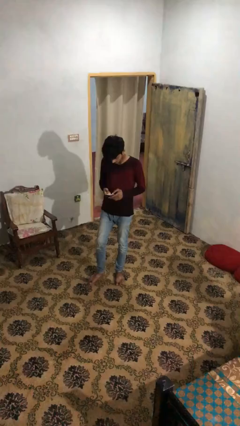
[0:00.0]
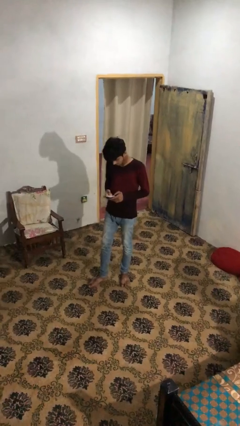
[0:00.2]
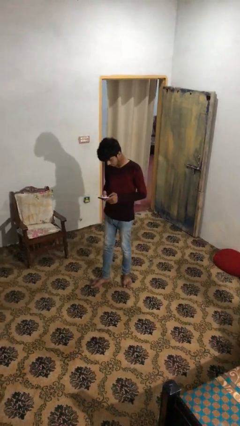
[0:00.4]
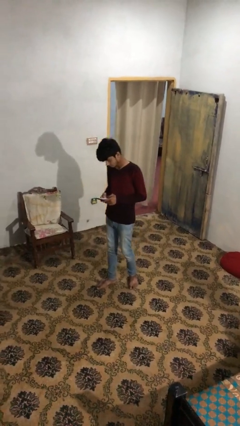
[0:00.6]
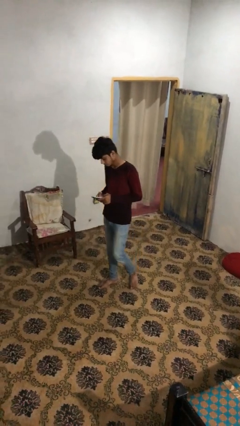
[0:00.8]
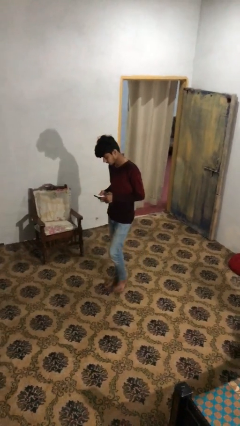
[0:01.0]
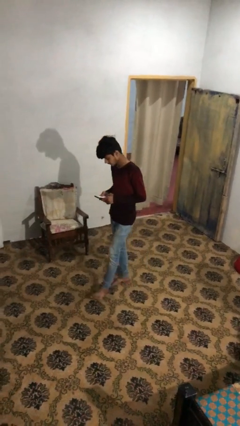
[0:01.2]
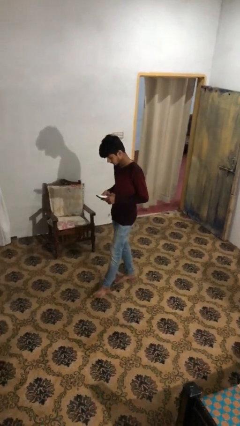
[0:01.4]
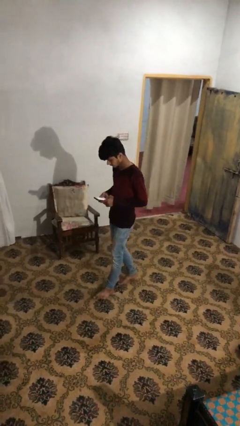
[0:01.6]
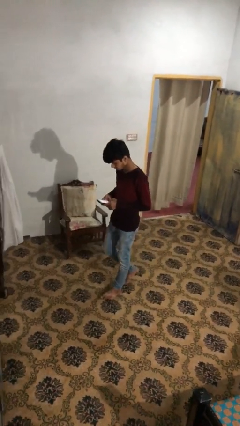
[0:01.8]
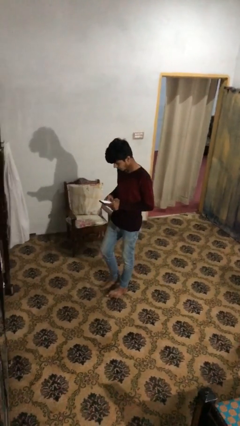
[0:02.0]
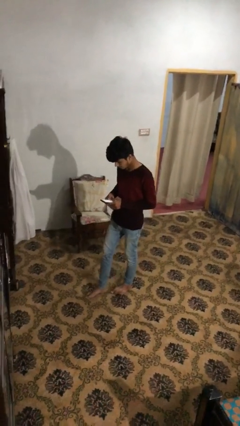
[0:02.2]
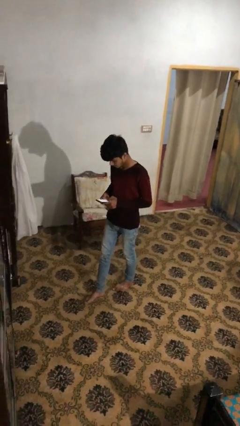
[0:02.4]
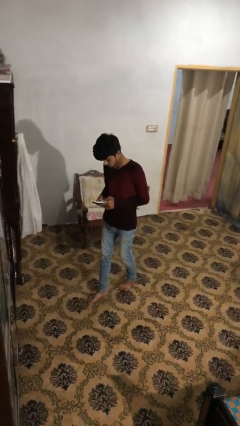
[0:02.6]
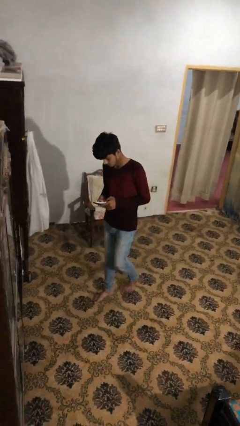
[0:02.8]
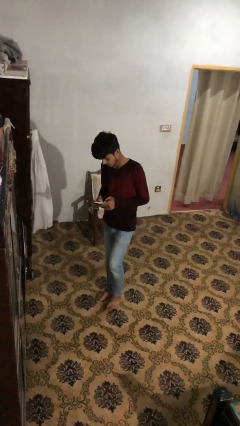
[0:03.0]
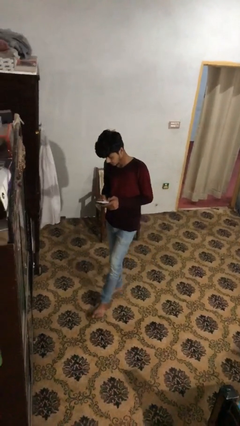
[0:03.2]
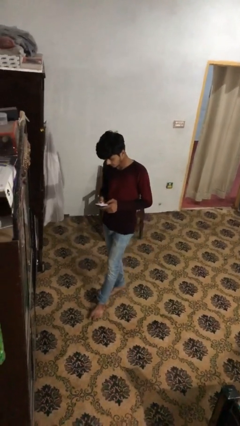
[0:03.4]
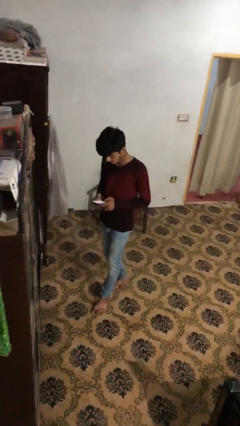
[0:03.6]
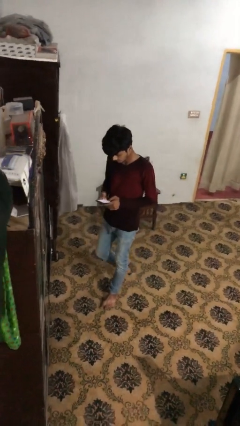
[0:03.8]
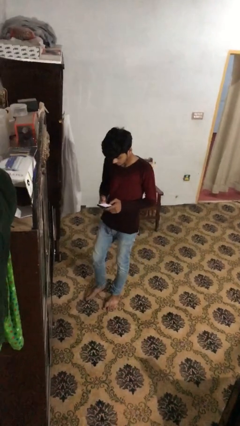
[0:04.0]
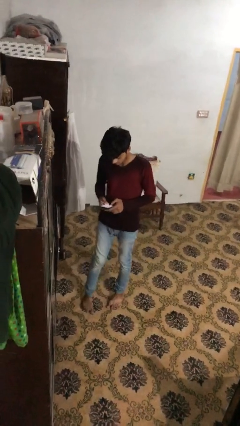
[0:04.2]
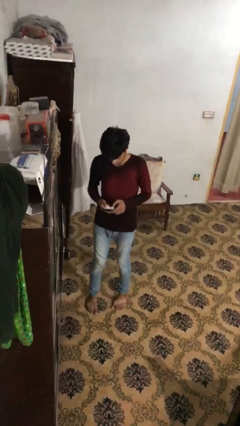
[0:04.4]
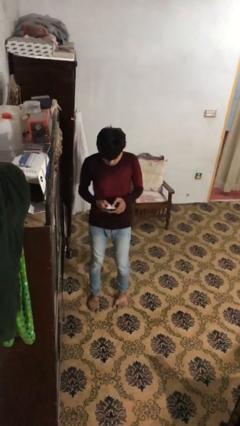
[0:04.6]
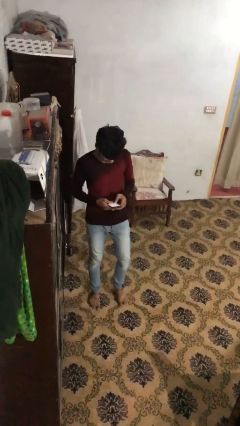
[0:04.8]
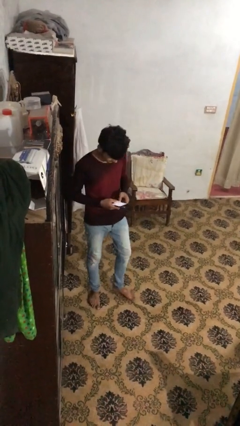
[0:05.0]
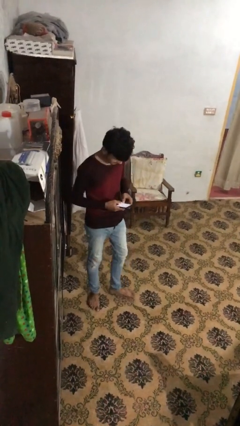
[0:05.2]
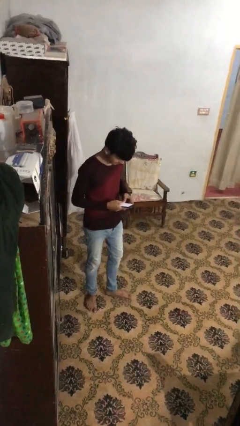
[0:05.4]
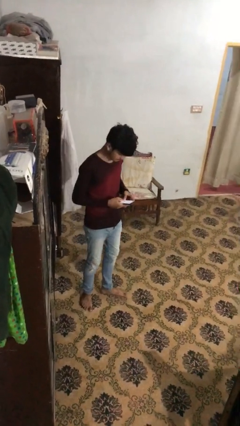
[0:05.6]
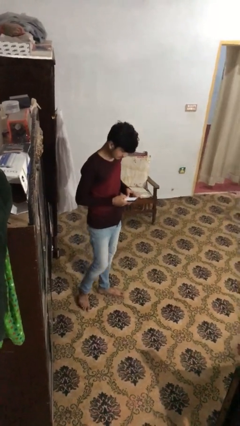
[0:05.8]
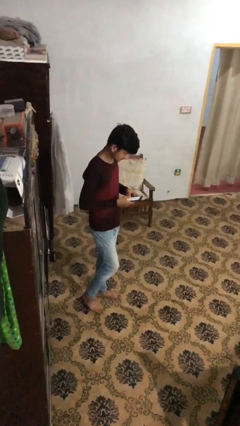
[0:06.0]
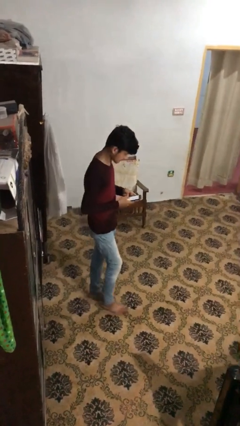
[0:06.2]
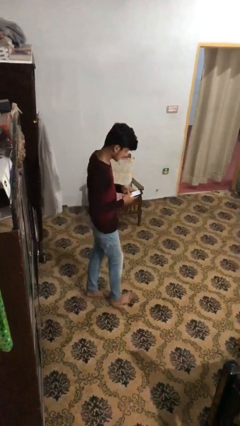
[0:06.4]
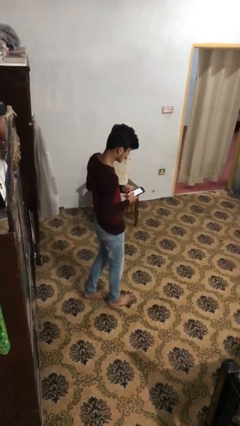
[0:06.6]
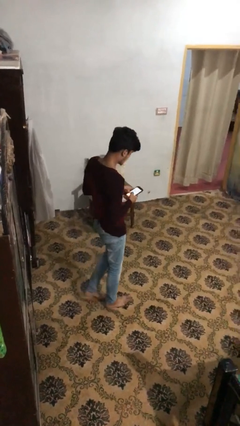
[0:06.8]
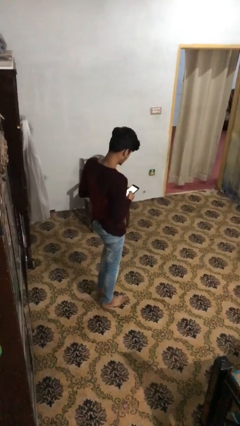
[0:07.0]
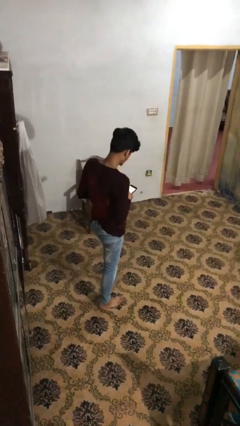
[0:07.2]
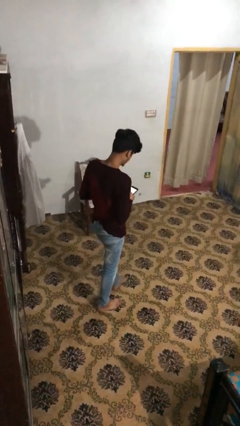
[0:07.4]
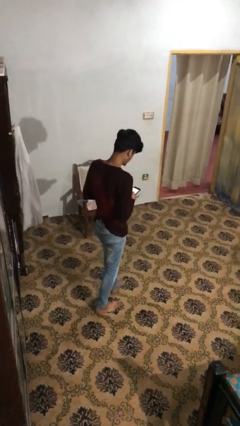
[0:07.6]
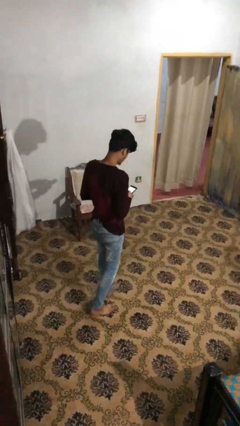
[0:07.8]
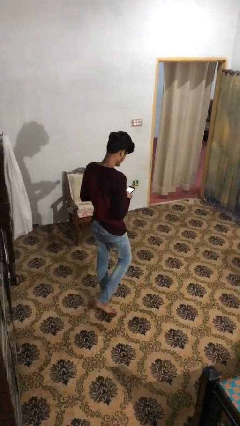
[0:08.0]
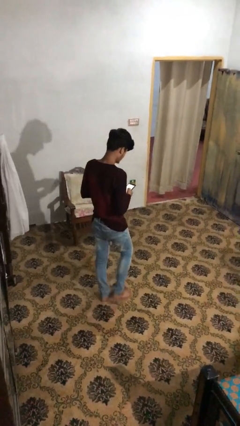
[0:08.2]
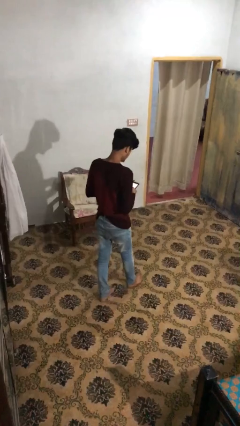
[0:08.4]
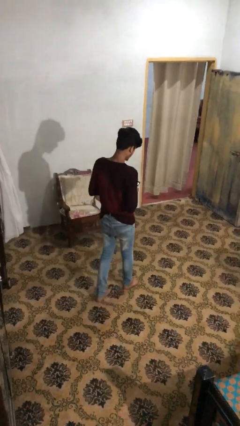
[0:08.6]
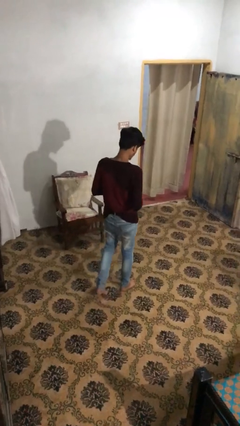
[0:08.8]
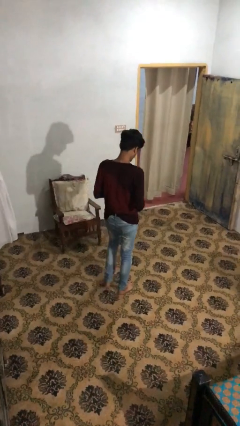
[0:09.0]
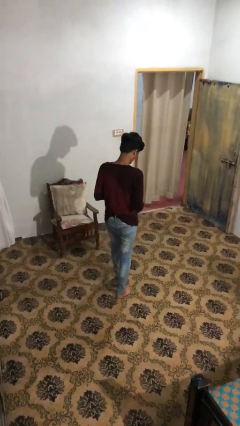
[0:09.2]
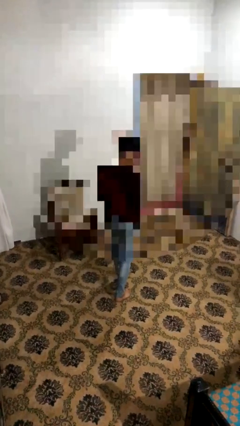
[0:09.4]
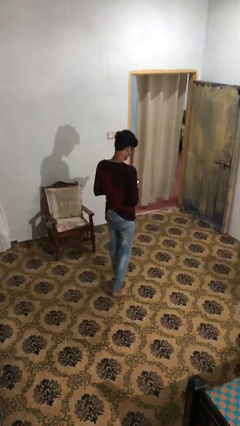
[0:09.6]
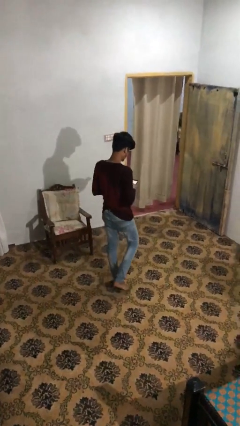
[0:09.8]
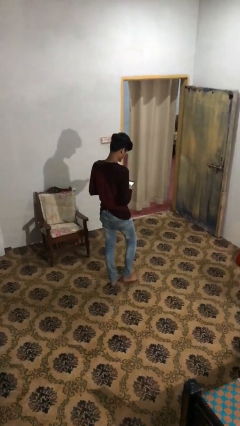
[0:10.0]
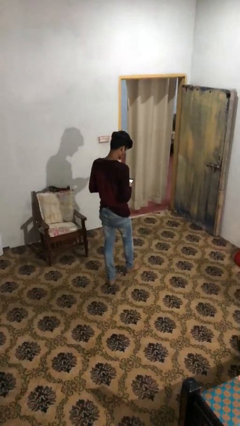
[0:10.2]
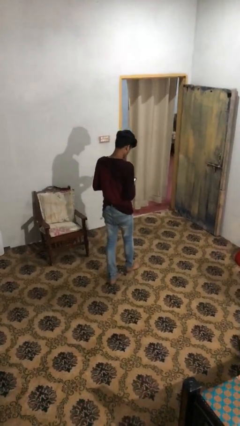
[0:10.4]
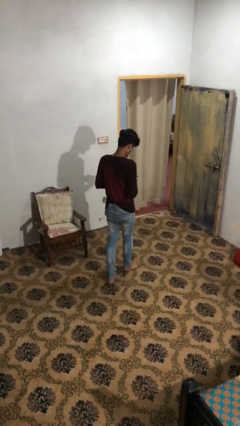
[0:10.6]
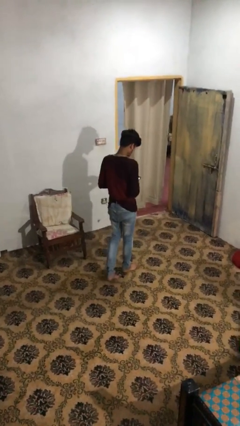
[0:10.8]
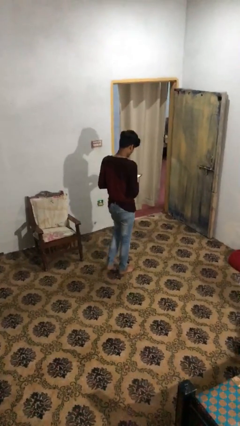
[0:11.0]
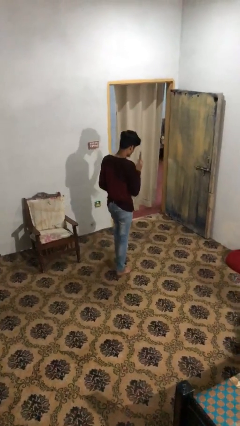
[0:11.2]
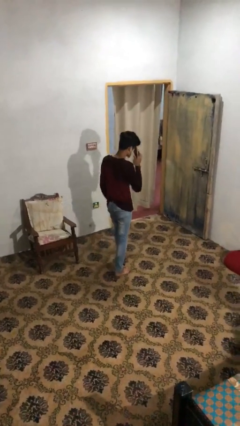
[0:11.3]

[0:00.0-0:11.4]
person texts on phone

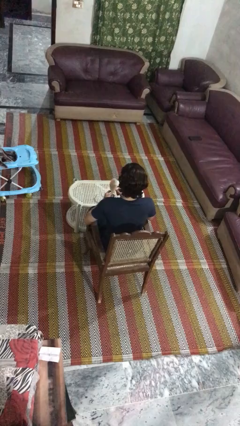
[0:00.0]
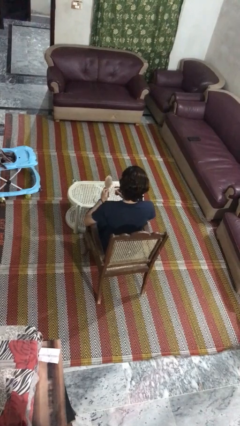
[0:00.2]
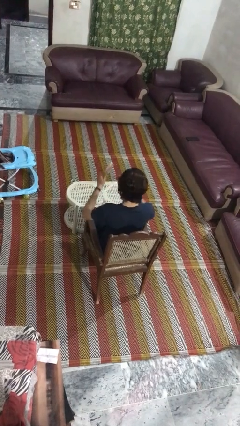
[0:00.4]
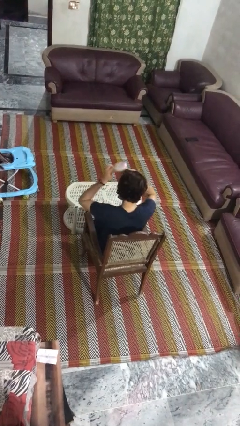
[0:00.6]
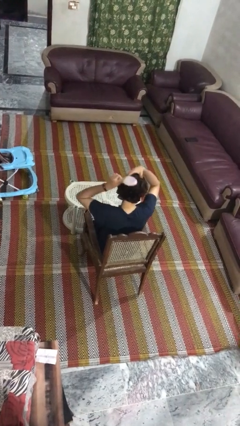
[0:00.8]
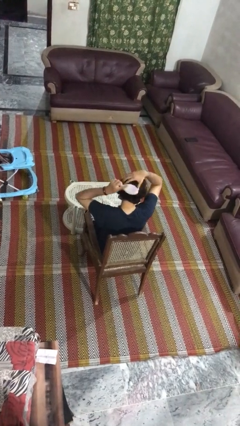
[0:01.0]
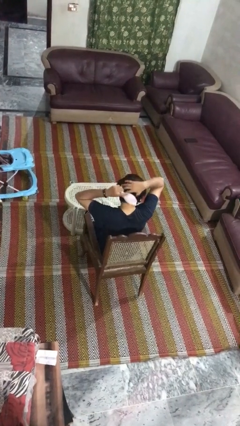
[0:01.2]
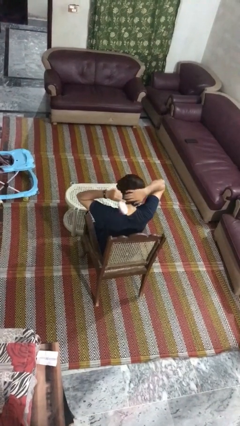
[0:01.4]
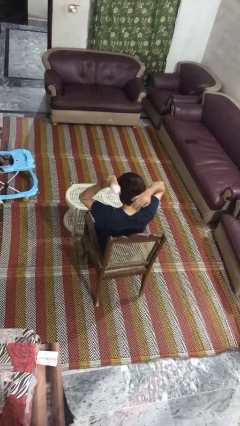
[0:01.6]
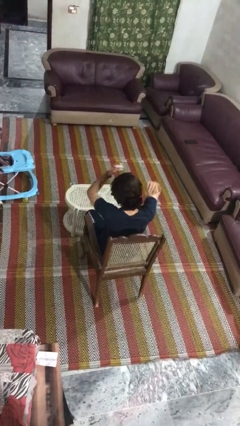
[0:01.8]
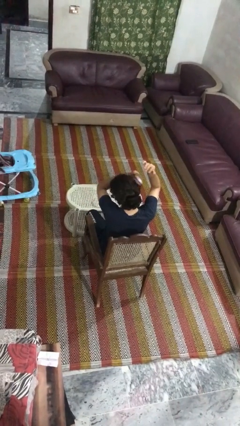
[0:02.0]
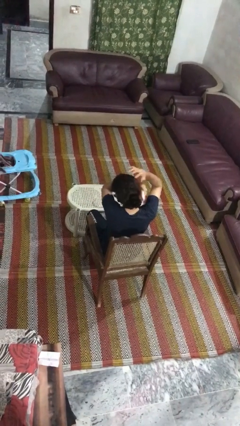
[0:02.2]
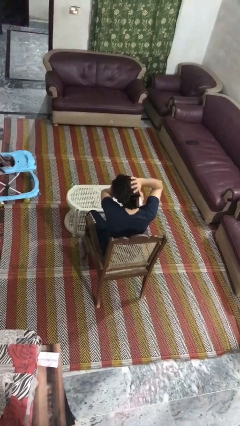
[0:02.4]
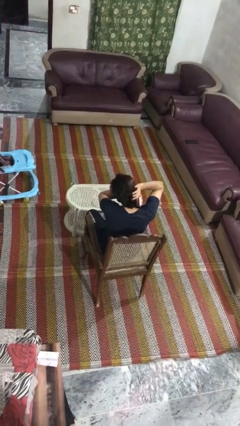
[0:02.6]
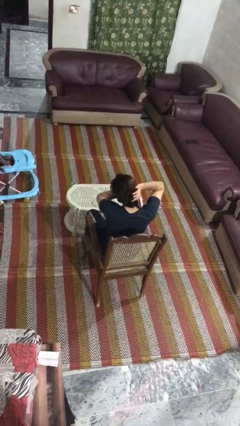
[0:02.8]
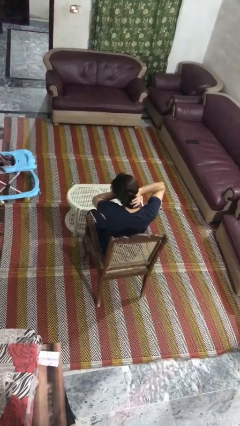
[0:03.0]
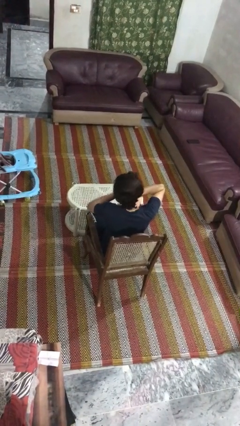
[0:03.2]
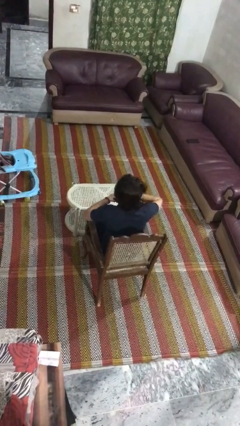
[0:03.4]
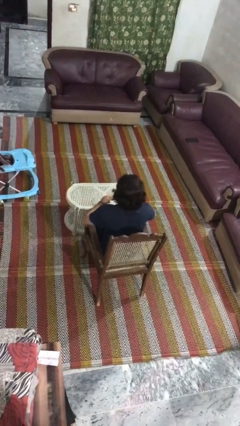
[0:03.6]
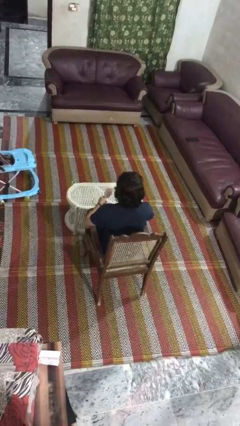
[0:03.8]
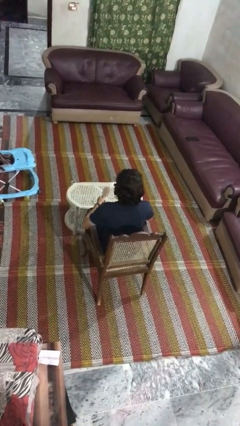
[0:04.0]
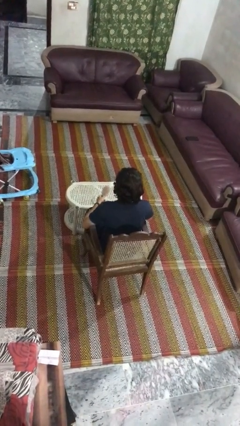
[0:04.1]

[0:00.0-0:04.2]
person brushes hair

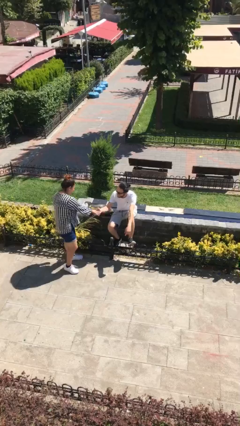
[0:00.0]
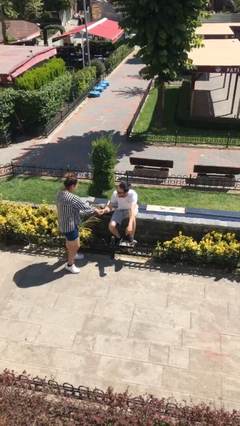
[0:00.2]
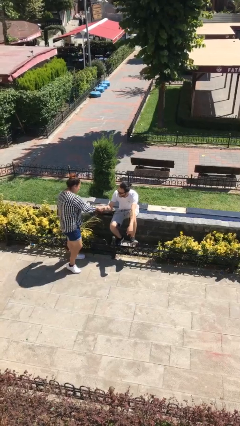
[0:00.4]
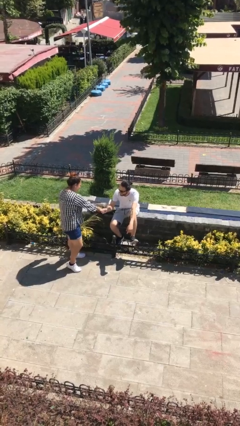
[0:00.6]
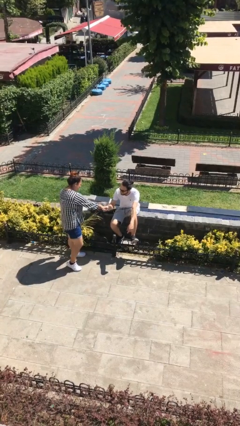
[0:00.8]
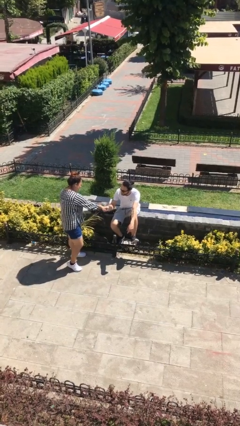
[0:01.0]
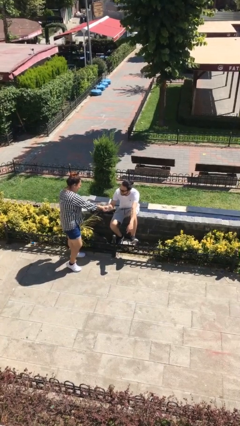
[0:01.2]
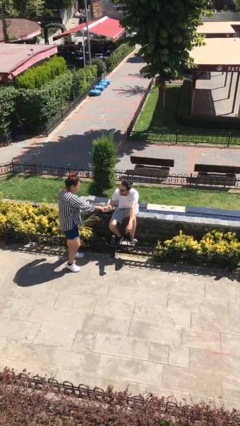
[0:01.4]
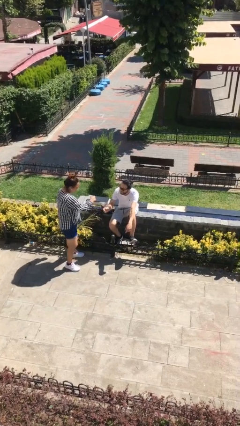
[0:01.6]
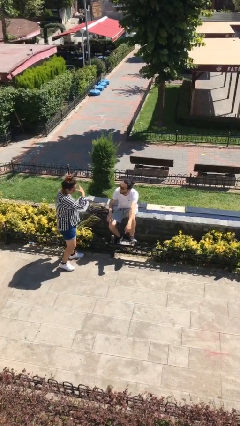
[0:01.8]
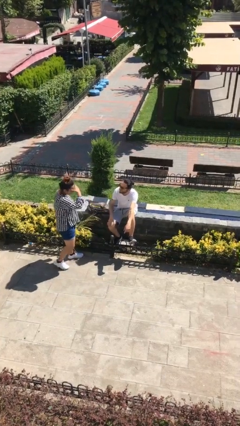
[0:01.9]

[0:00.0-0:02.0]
person shakes hand

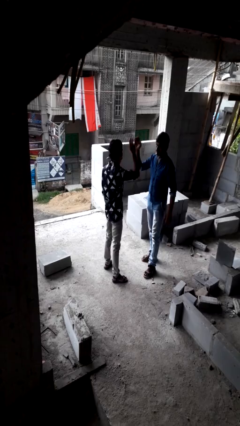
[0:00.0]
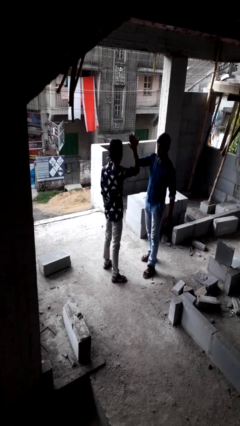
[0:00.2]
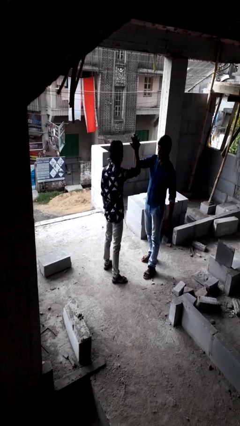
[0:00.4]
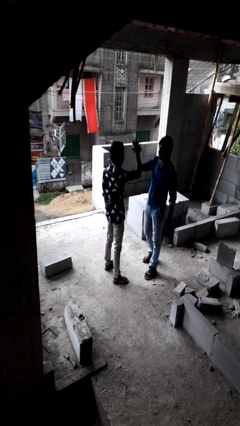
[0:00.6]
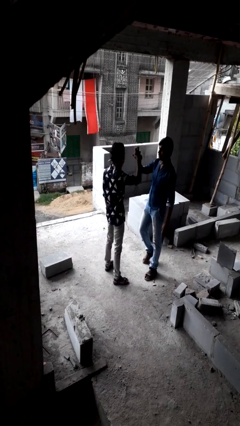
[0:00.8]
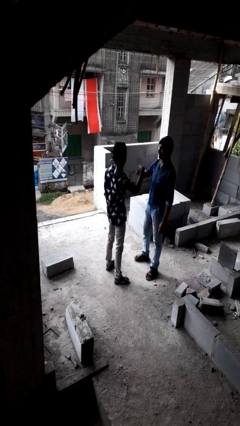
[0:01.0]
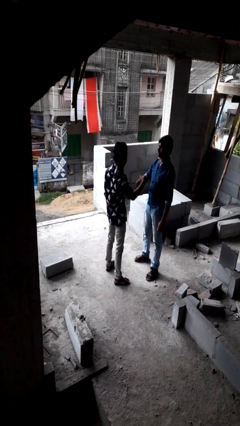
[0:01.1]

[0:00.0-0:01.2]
person highfives hand
